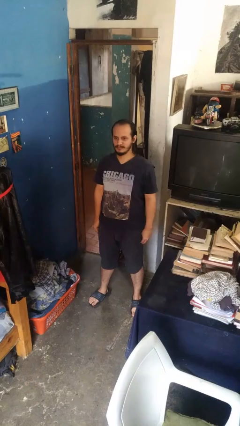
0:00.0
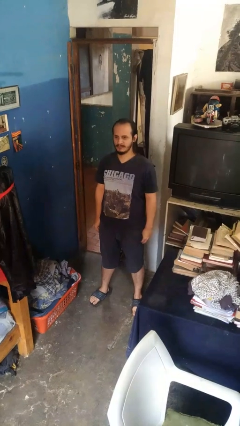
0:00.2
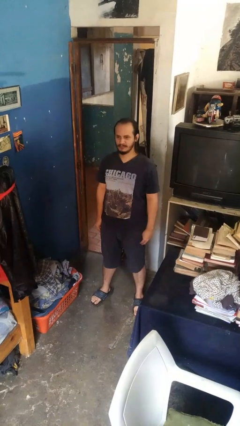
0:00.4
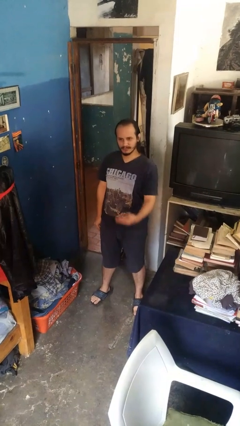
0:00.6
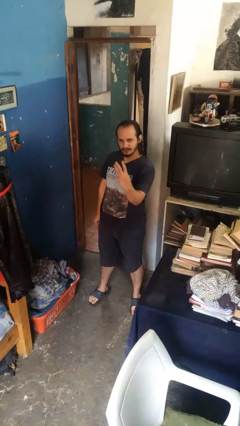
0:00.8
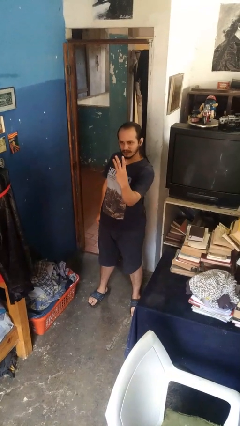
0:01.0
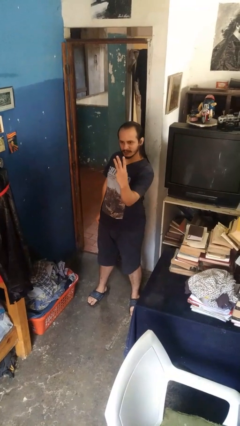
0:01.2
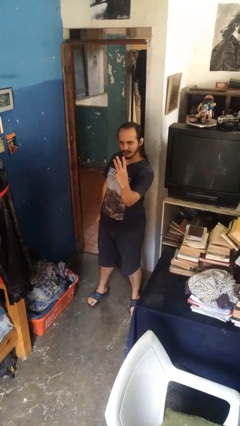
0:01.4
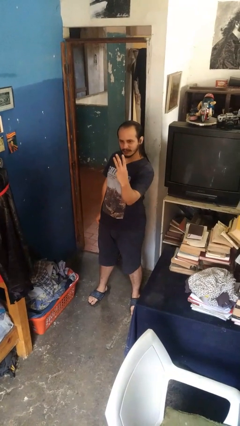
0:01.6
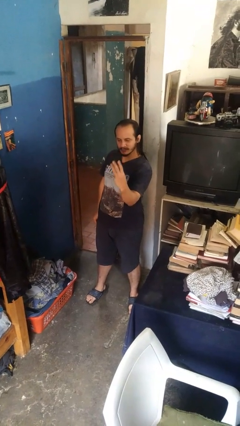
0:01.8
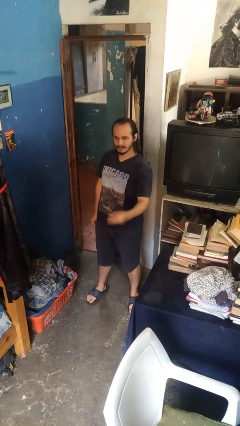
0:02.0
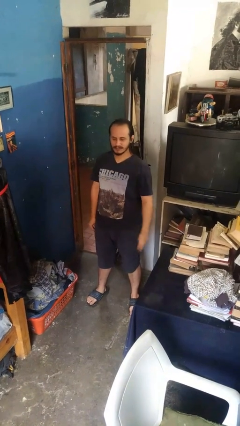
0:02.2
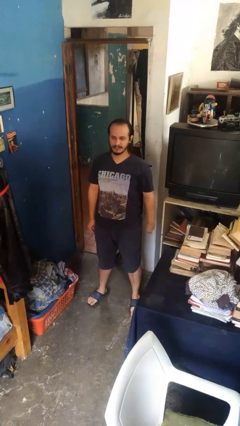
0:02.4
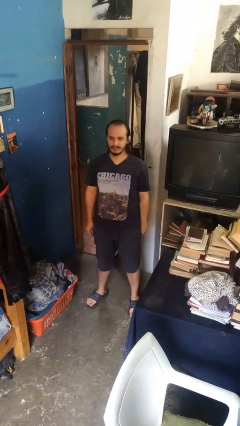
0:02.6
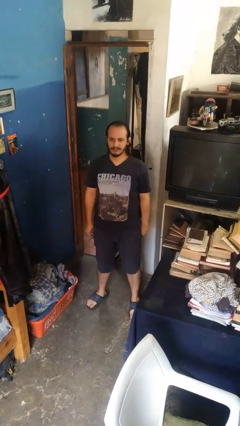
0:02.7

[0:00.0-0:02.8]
person gestures number three

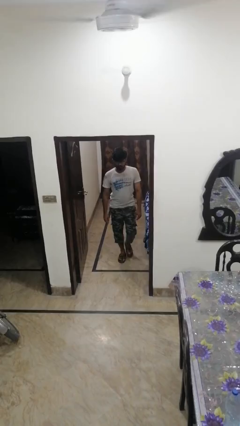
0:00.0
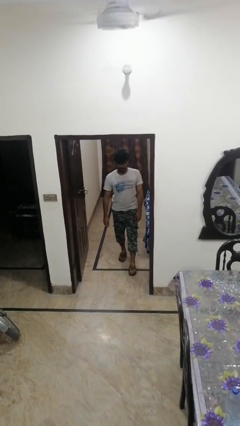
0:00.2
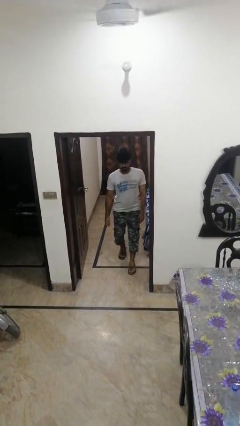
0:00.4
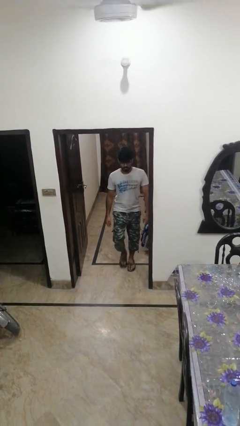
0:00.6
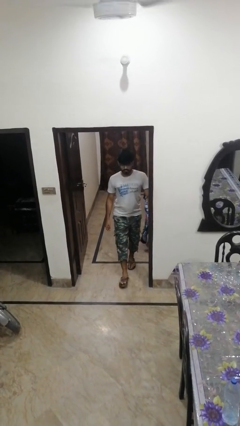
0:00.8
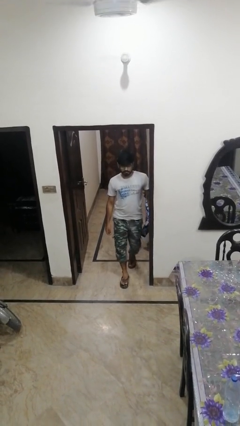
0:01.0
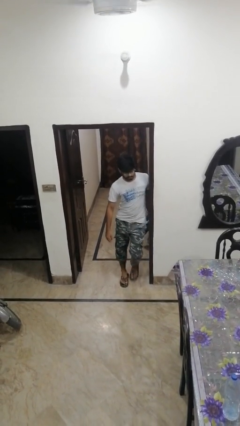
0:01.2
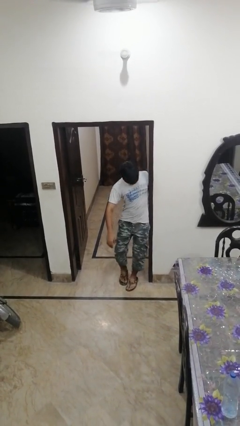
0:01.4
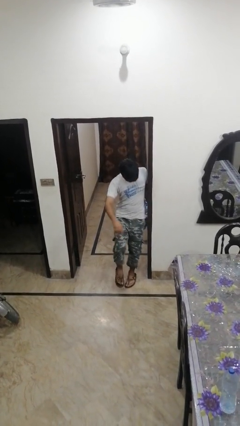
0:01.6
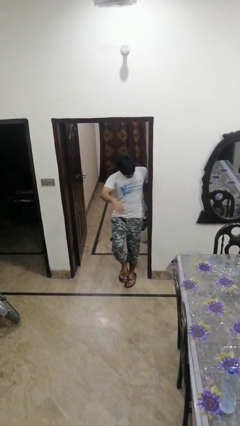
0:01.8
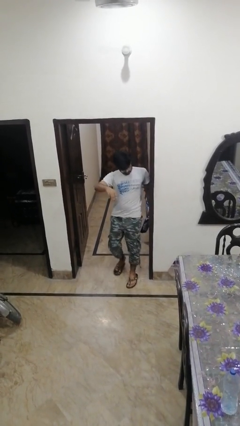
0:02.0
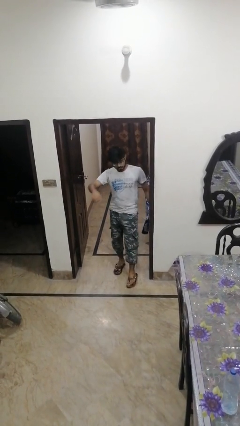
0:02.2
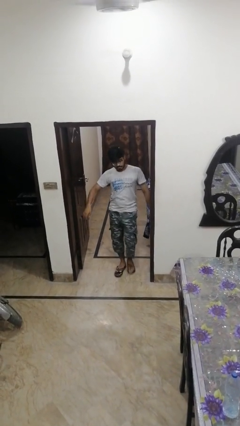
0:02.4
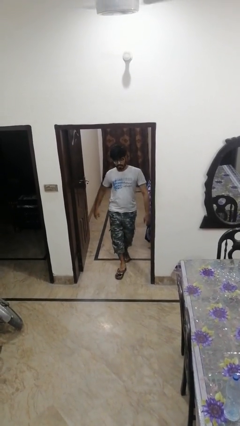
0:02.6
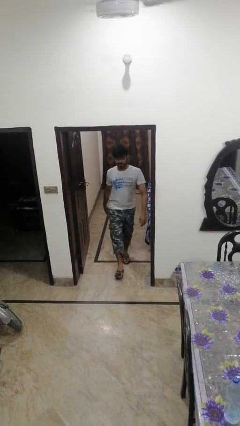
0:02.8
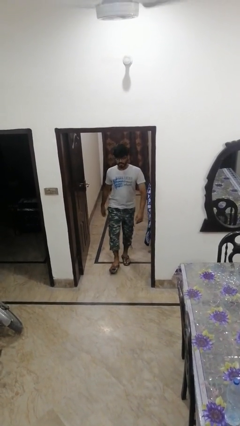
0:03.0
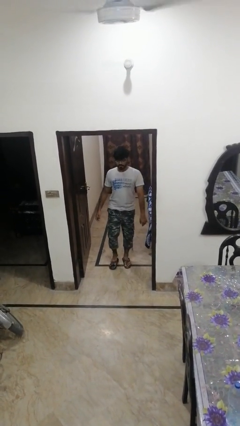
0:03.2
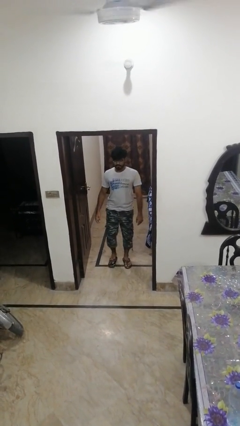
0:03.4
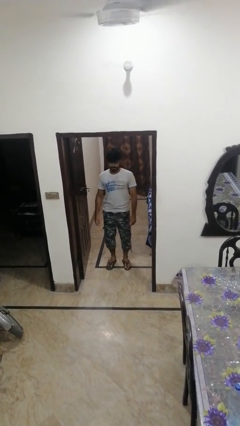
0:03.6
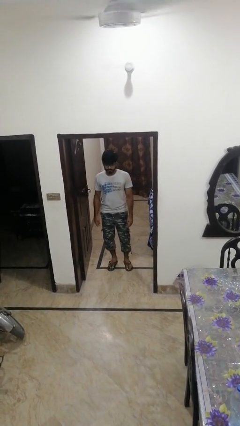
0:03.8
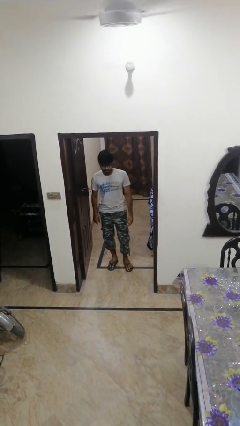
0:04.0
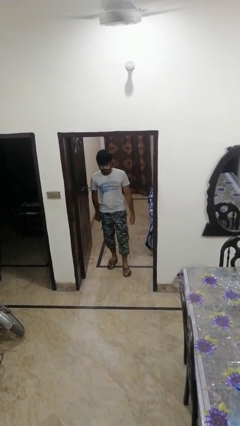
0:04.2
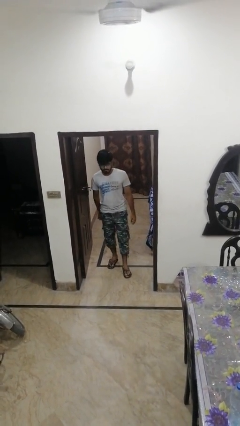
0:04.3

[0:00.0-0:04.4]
person bumps into wall

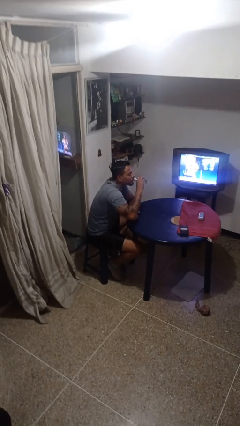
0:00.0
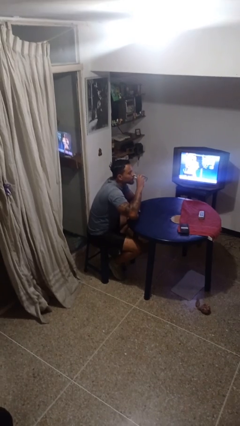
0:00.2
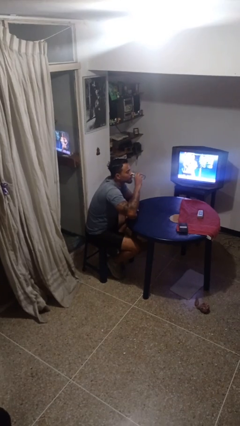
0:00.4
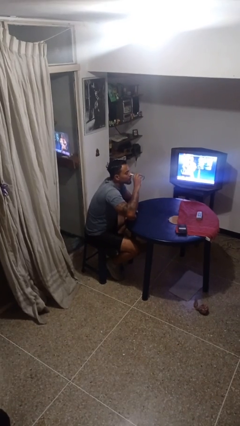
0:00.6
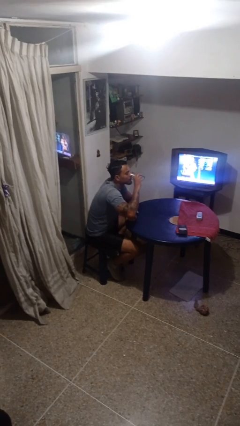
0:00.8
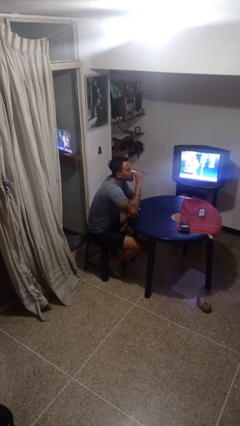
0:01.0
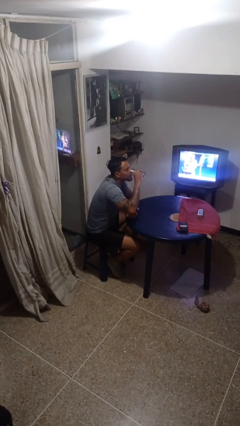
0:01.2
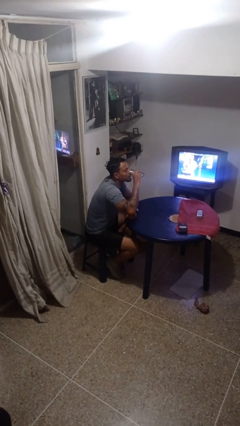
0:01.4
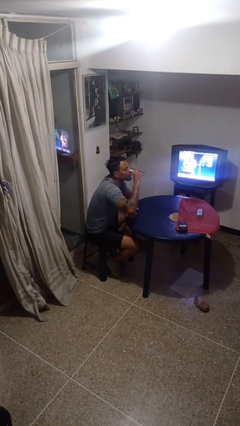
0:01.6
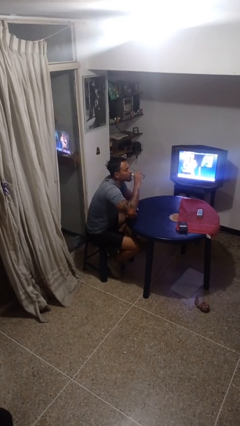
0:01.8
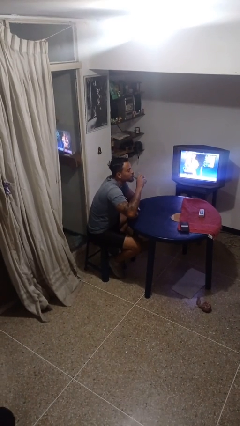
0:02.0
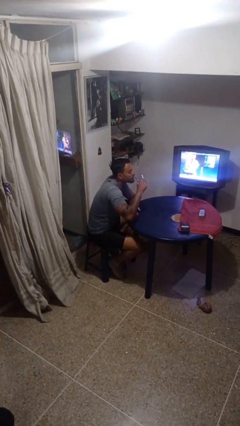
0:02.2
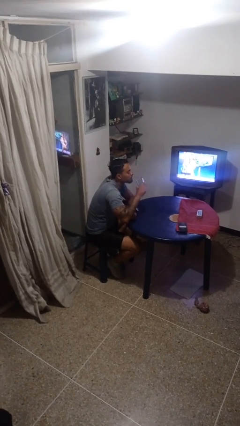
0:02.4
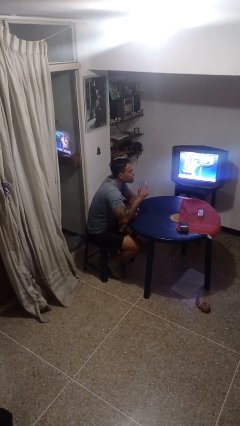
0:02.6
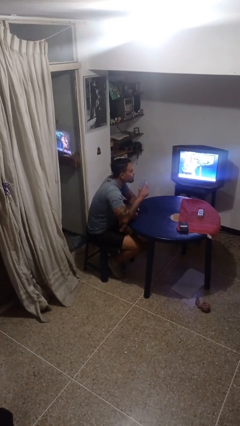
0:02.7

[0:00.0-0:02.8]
person drinks from mug

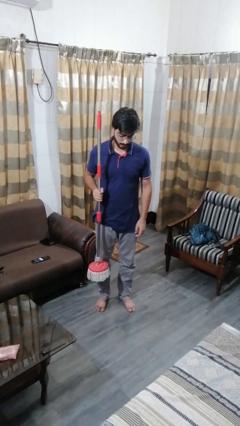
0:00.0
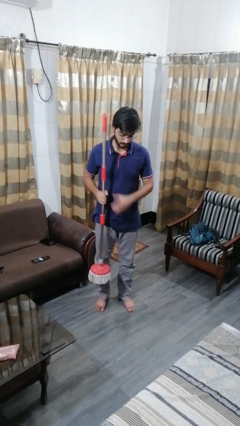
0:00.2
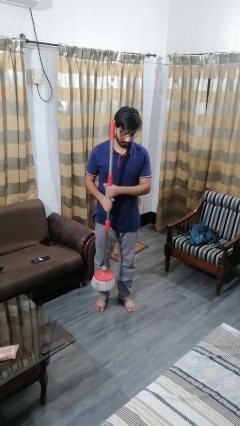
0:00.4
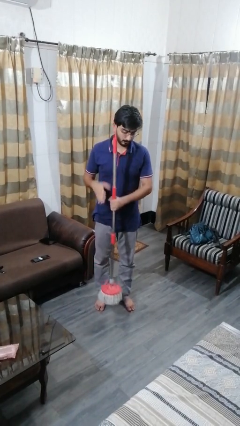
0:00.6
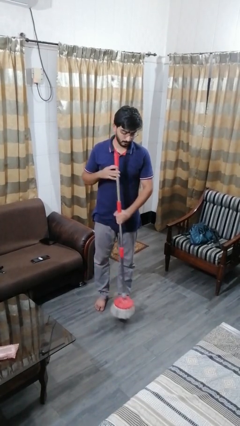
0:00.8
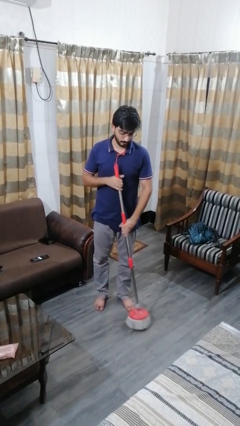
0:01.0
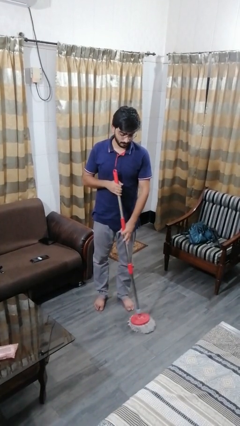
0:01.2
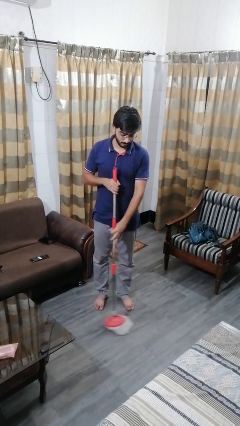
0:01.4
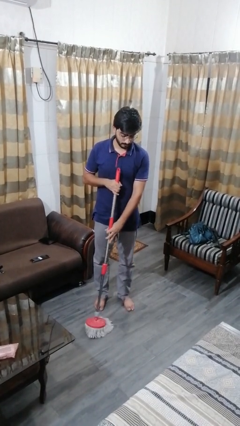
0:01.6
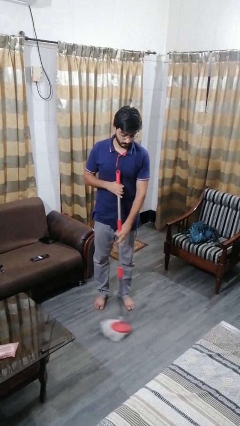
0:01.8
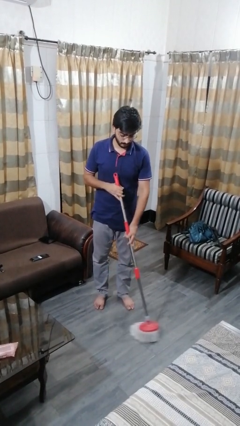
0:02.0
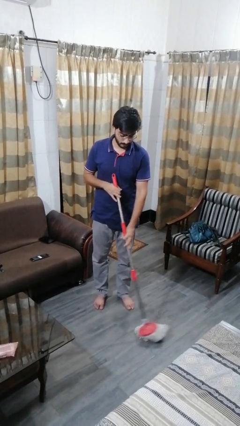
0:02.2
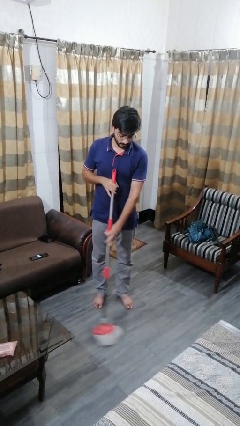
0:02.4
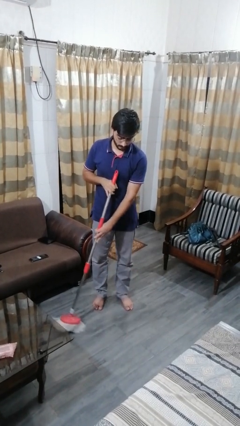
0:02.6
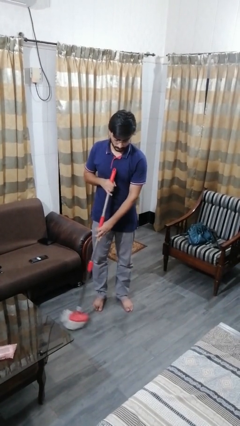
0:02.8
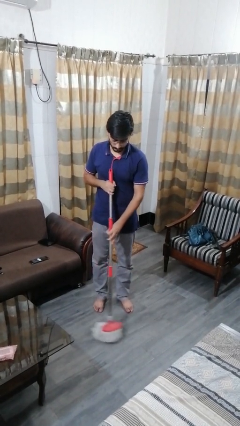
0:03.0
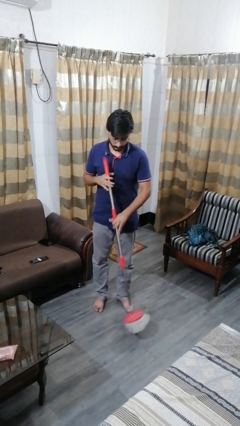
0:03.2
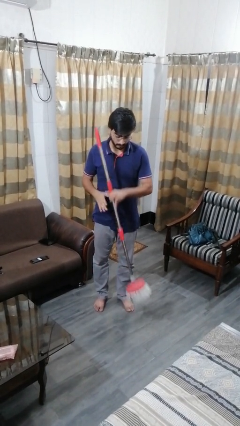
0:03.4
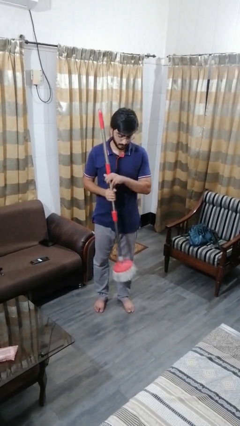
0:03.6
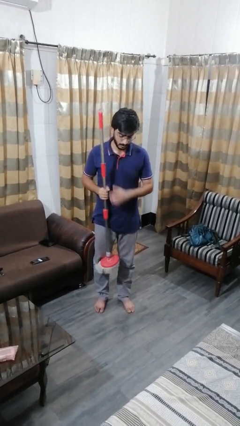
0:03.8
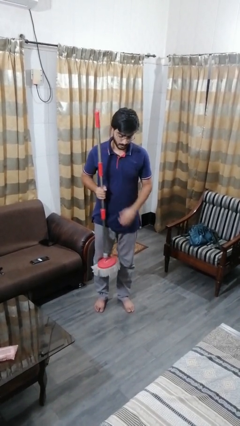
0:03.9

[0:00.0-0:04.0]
person sweeps floor

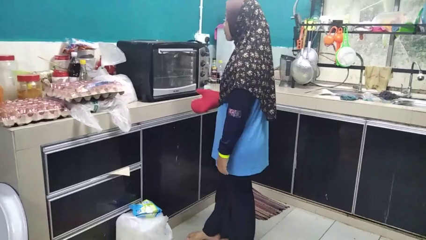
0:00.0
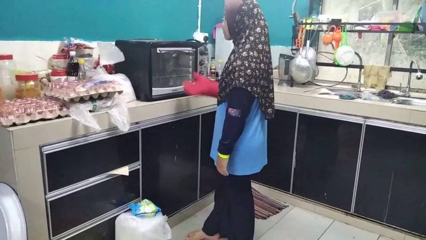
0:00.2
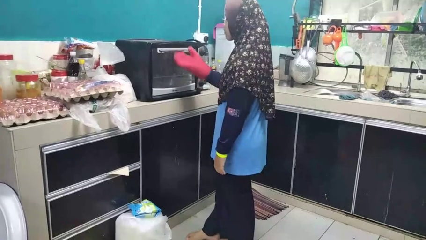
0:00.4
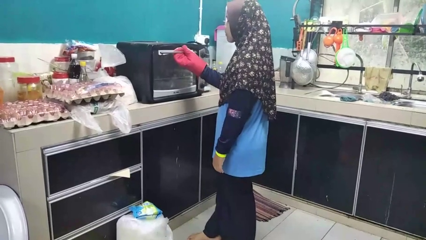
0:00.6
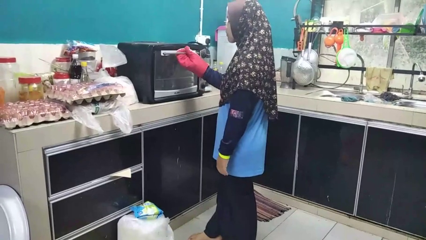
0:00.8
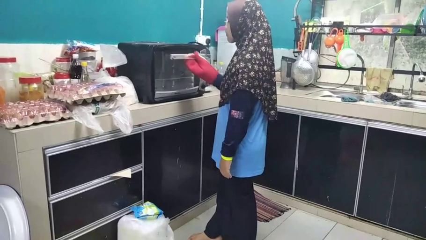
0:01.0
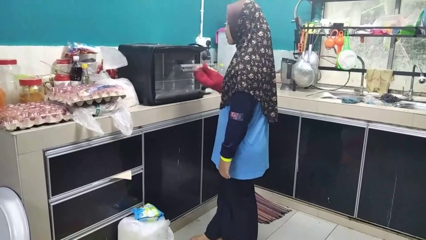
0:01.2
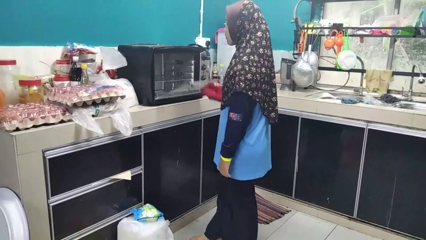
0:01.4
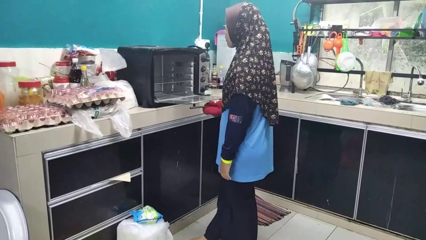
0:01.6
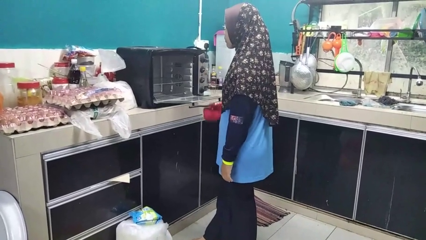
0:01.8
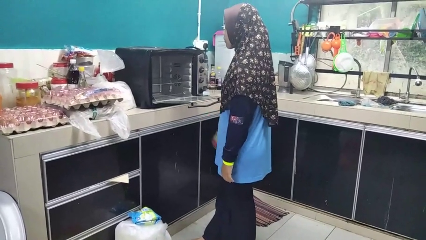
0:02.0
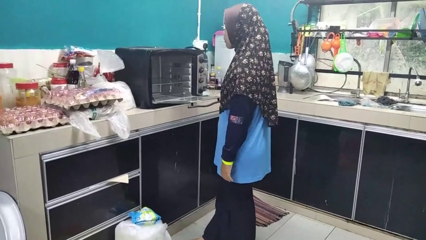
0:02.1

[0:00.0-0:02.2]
person opens oven door

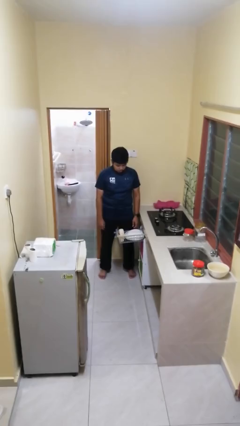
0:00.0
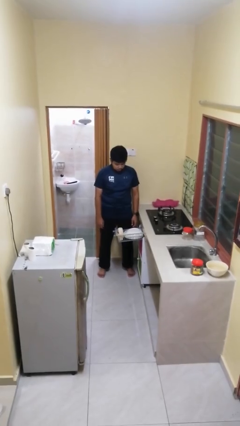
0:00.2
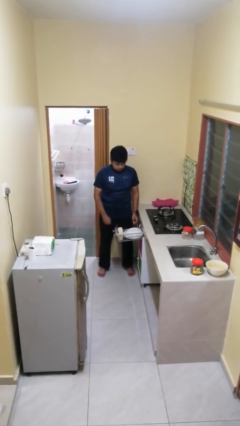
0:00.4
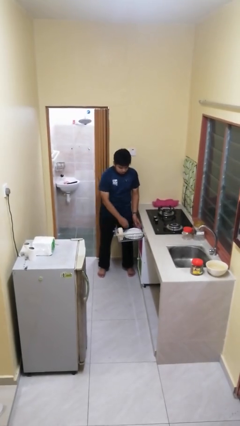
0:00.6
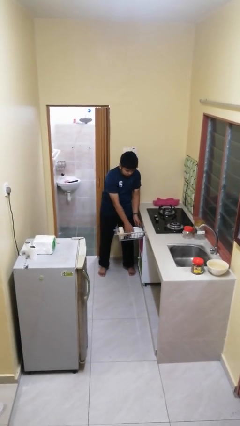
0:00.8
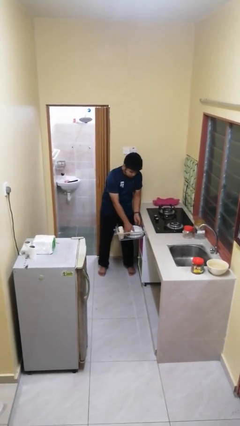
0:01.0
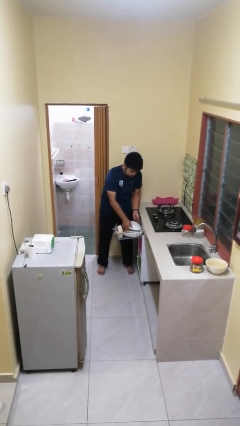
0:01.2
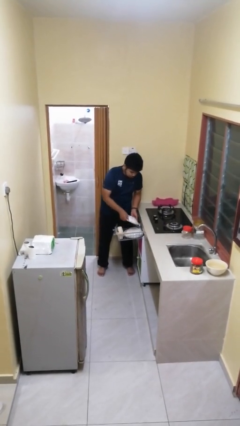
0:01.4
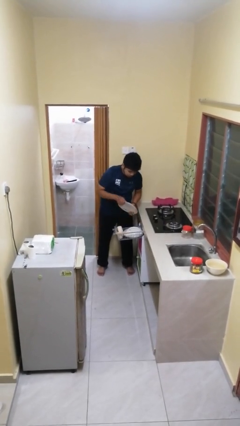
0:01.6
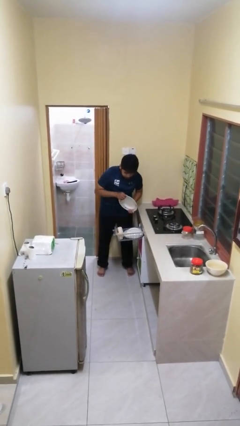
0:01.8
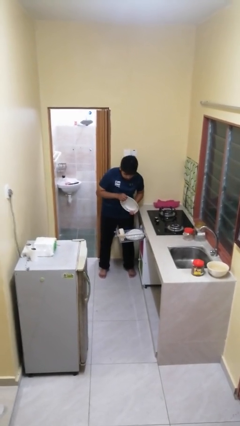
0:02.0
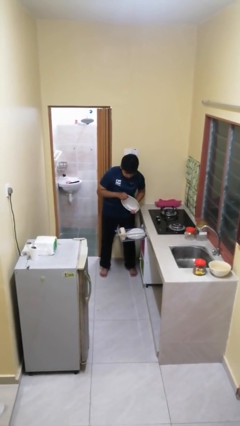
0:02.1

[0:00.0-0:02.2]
person takes object from kitchen drawer
